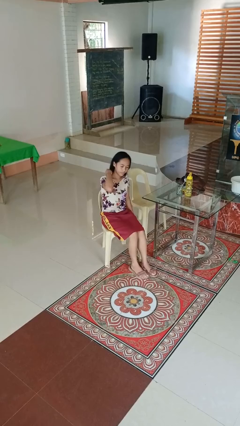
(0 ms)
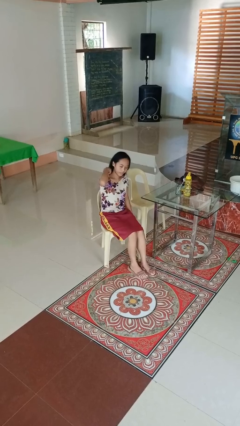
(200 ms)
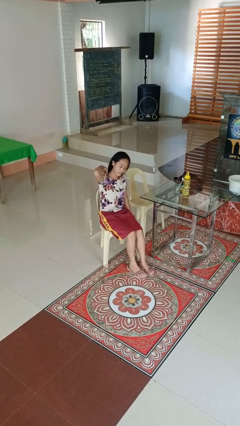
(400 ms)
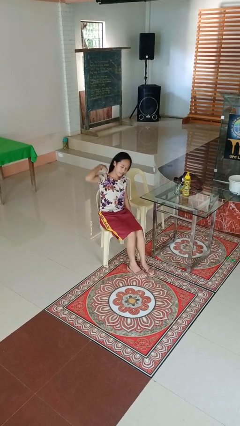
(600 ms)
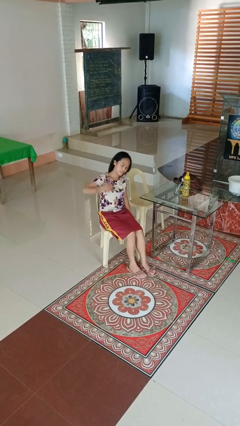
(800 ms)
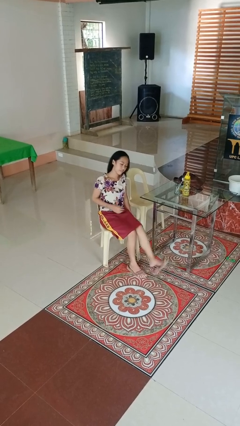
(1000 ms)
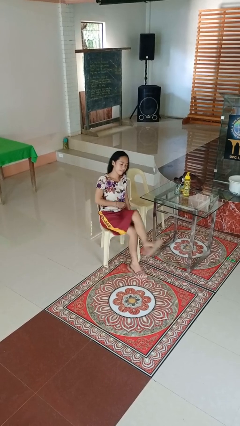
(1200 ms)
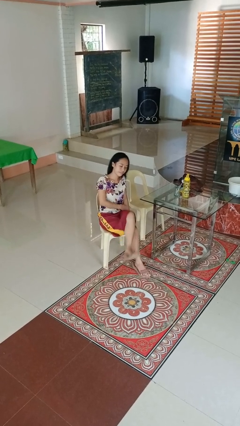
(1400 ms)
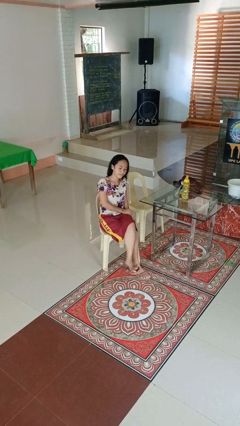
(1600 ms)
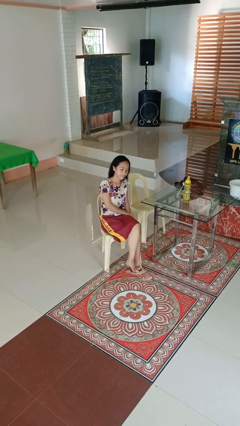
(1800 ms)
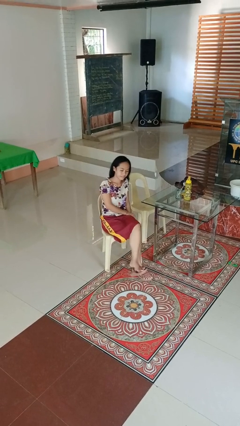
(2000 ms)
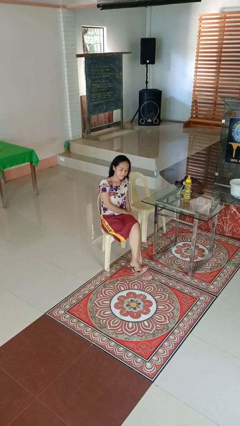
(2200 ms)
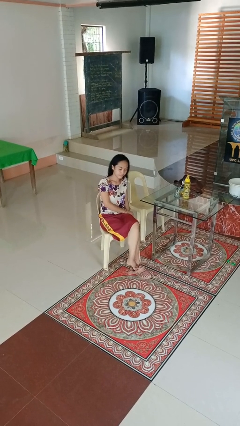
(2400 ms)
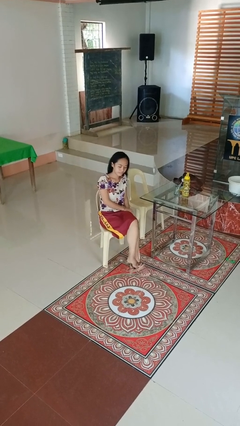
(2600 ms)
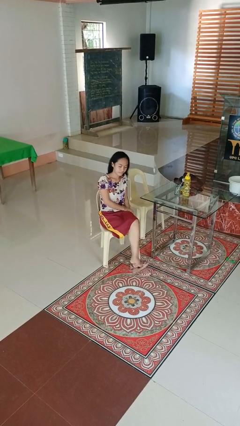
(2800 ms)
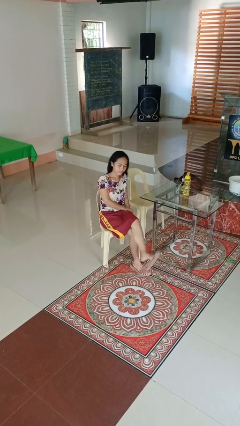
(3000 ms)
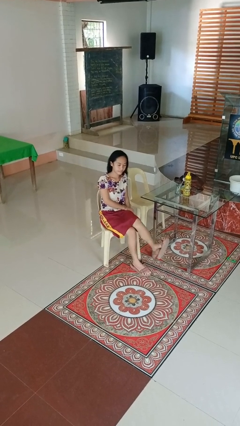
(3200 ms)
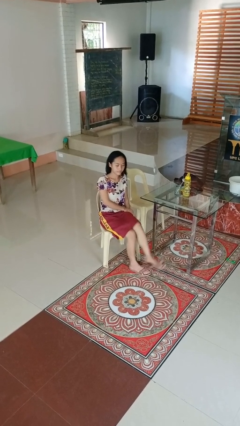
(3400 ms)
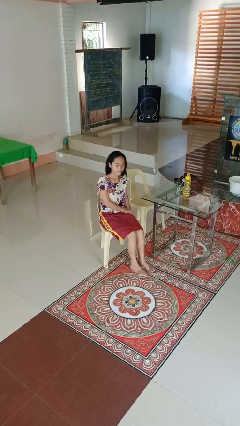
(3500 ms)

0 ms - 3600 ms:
person crosses legs

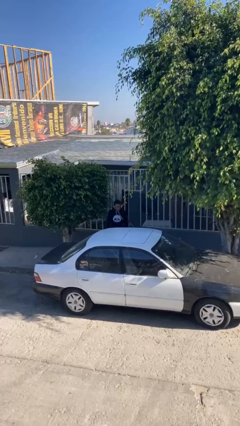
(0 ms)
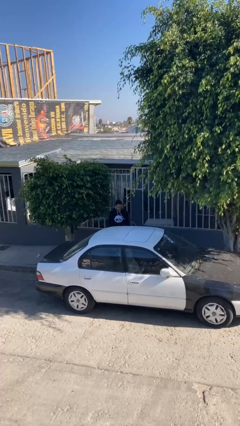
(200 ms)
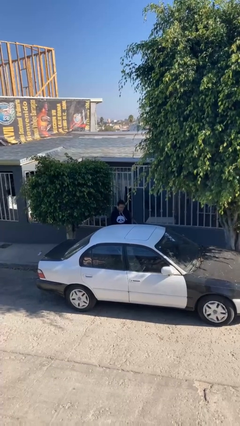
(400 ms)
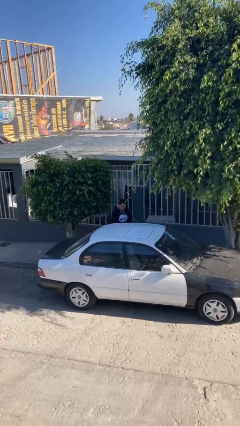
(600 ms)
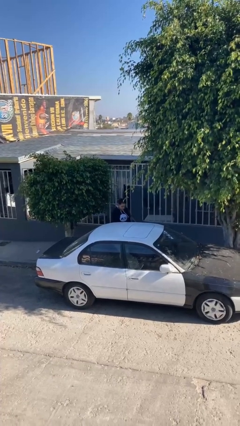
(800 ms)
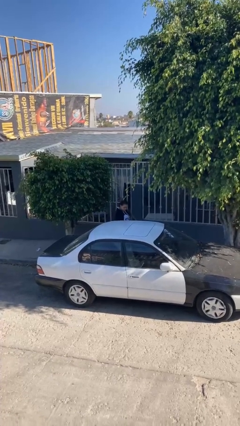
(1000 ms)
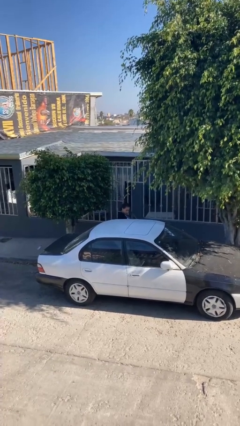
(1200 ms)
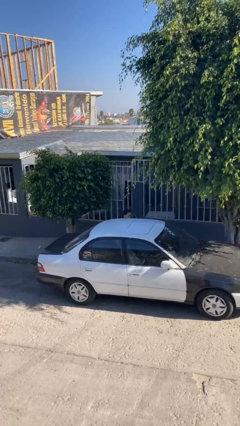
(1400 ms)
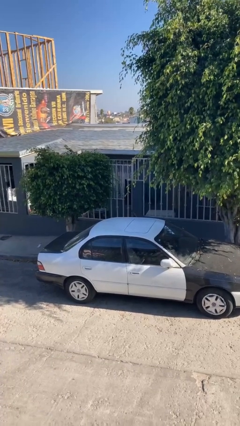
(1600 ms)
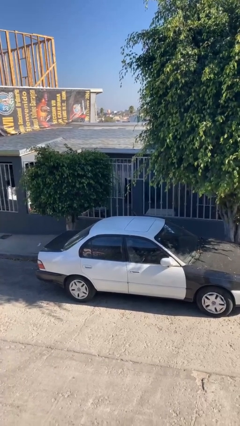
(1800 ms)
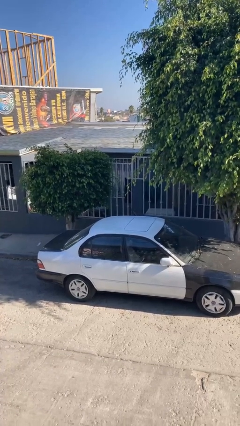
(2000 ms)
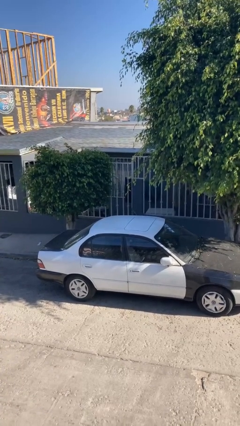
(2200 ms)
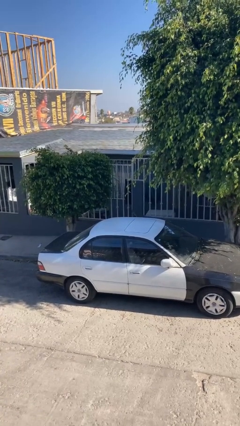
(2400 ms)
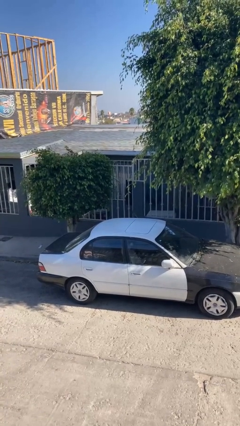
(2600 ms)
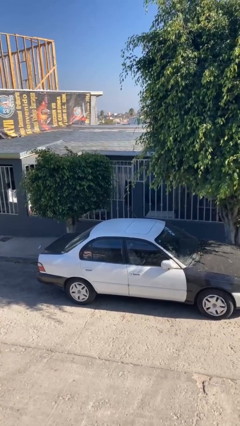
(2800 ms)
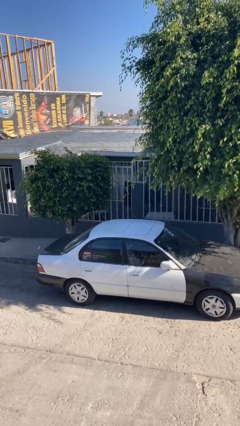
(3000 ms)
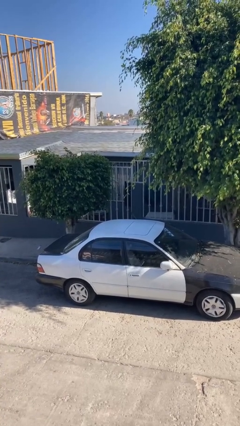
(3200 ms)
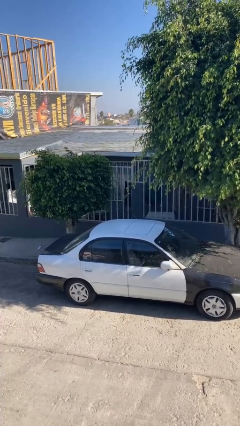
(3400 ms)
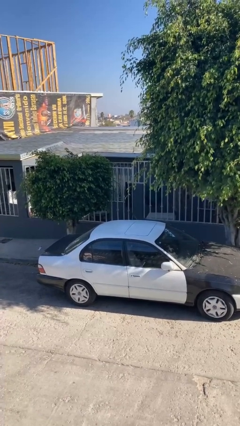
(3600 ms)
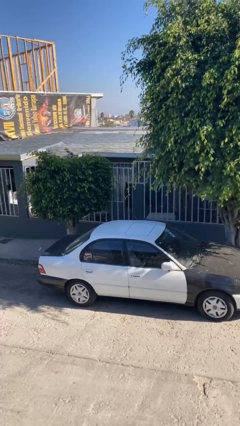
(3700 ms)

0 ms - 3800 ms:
person enters car

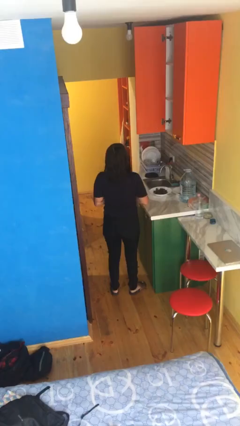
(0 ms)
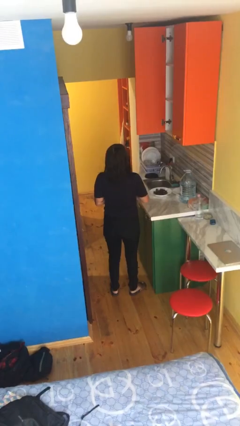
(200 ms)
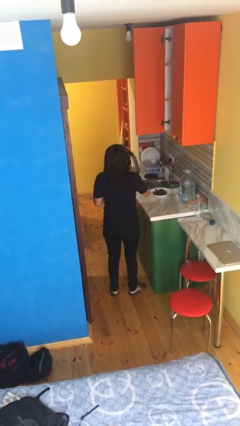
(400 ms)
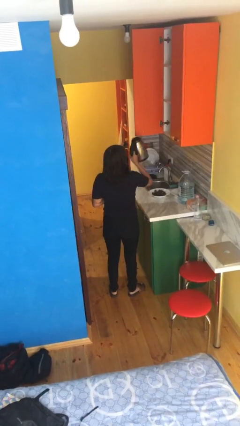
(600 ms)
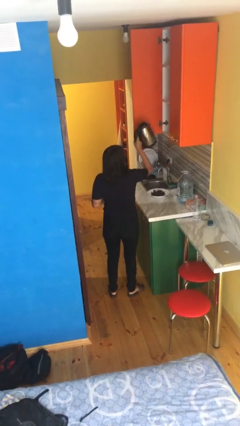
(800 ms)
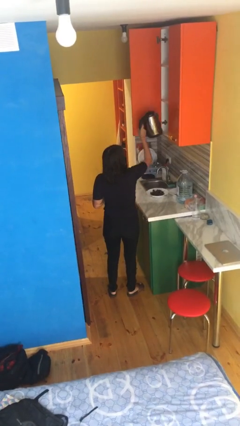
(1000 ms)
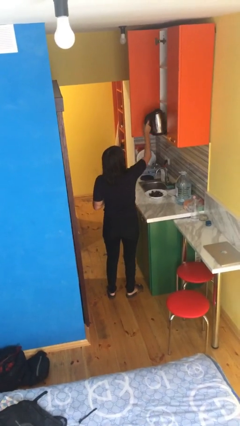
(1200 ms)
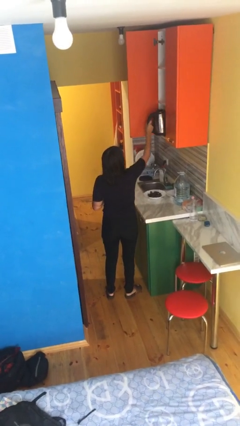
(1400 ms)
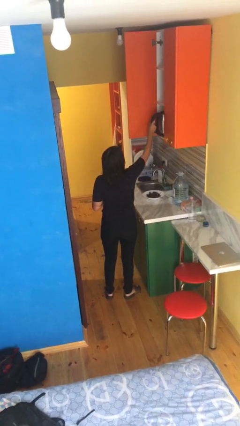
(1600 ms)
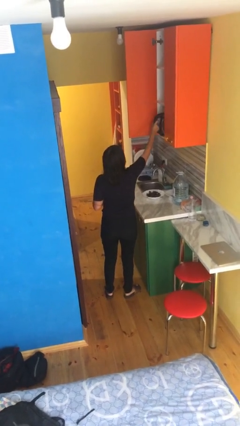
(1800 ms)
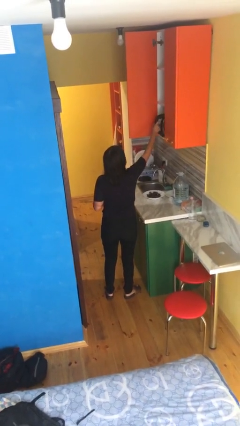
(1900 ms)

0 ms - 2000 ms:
person puts down object into cabinet

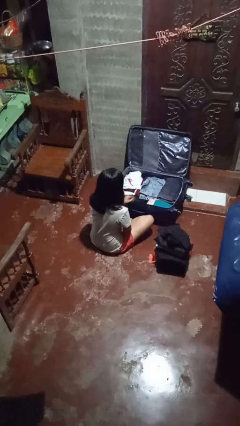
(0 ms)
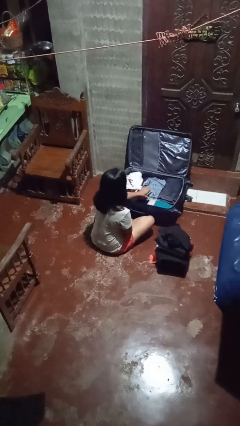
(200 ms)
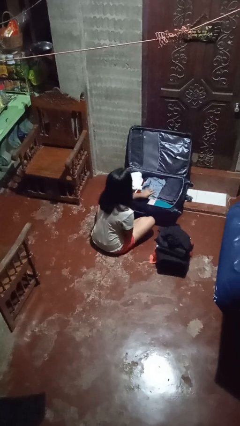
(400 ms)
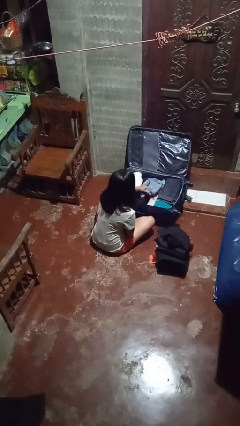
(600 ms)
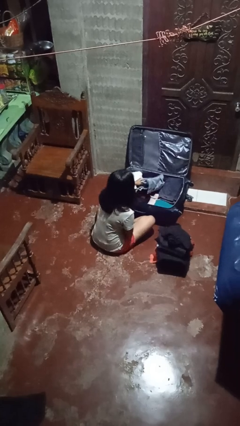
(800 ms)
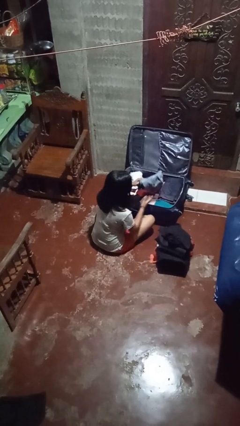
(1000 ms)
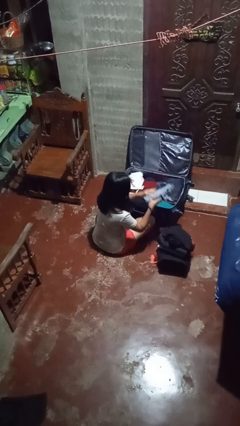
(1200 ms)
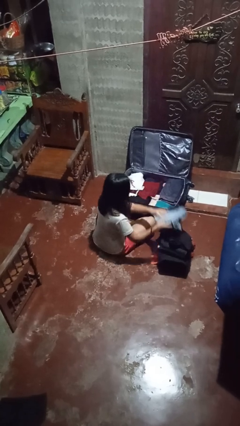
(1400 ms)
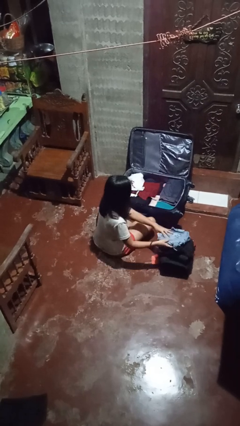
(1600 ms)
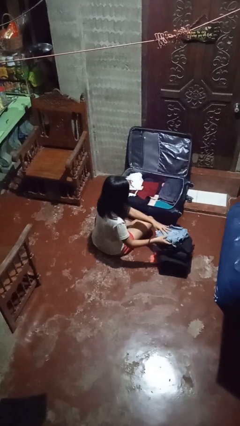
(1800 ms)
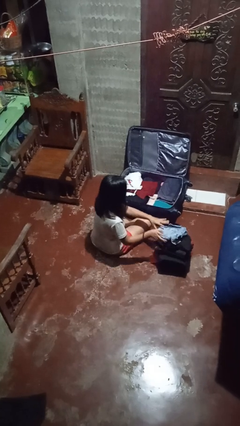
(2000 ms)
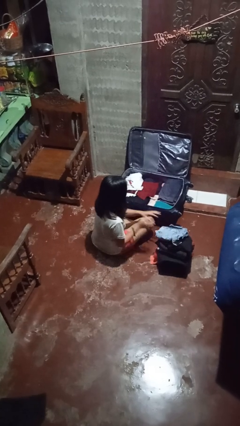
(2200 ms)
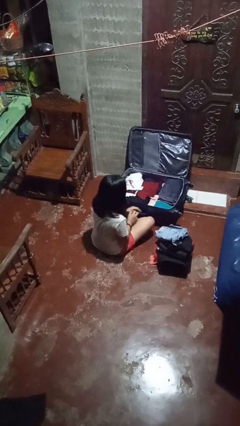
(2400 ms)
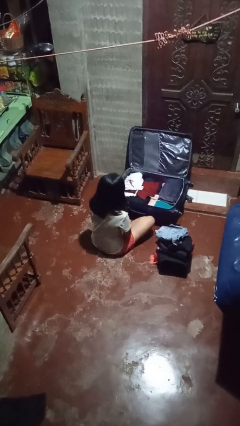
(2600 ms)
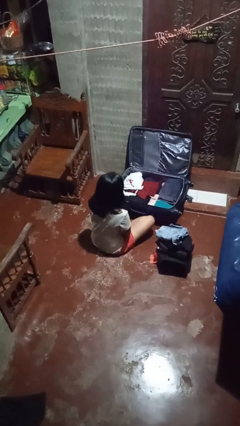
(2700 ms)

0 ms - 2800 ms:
person unloads clothes from suitcase

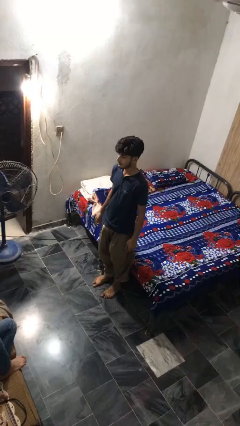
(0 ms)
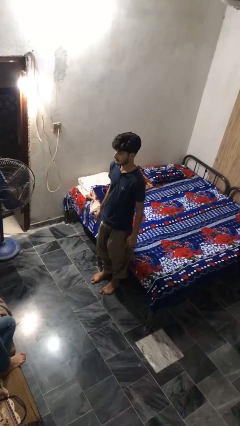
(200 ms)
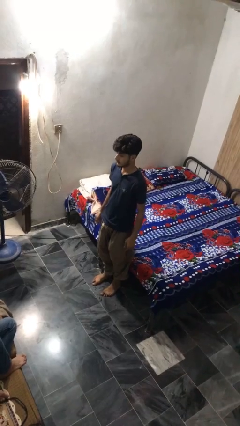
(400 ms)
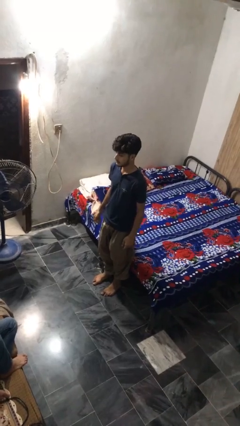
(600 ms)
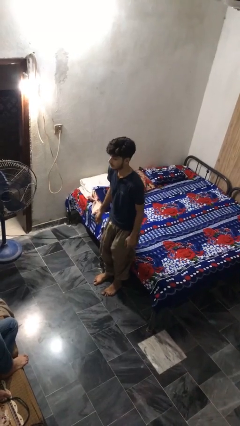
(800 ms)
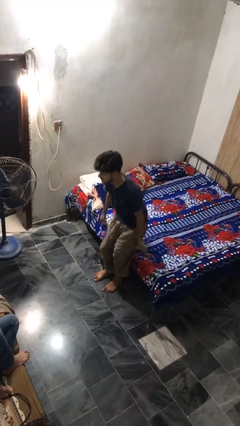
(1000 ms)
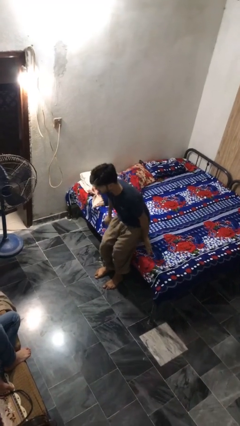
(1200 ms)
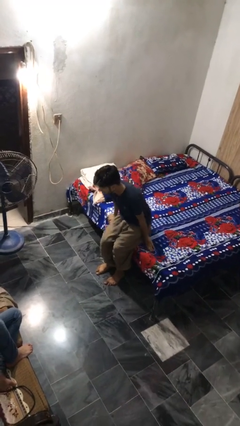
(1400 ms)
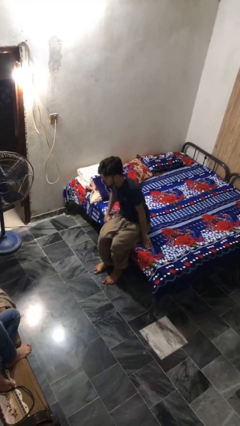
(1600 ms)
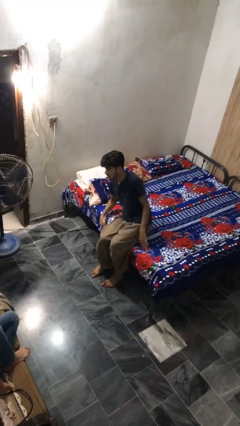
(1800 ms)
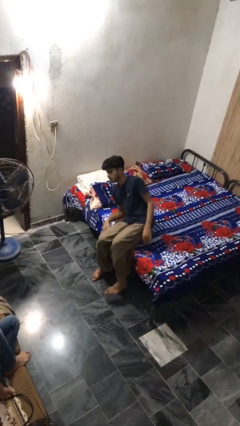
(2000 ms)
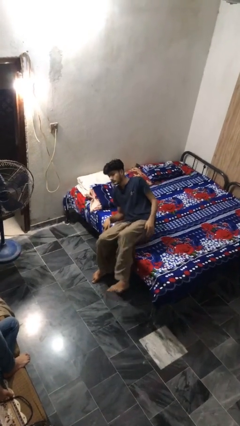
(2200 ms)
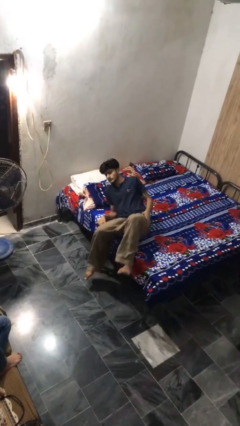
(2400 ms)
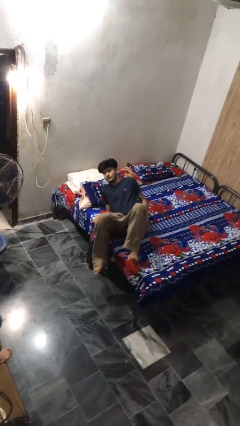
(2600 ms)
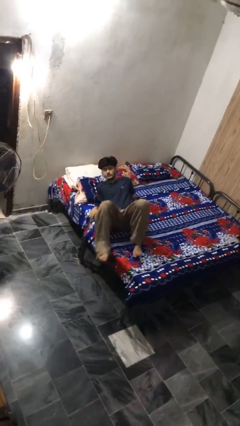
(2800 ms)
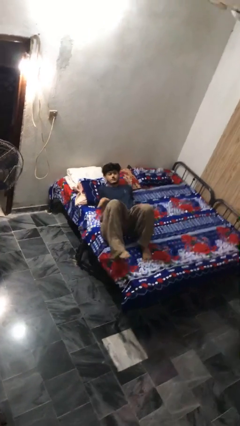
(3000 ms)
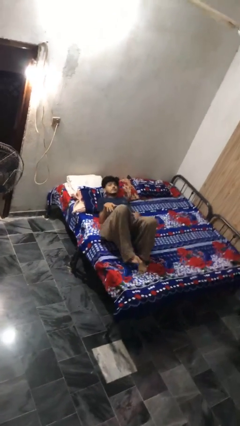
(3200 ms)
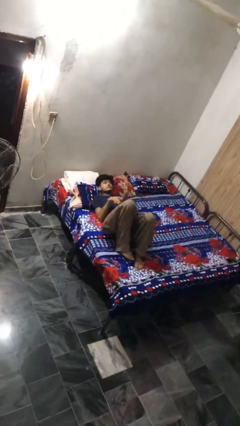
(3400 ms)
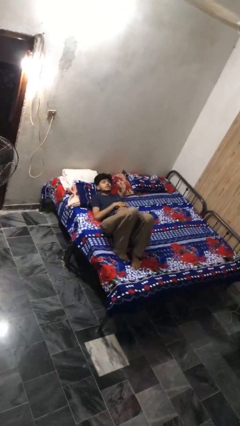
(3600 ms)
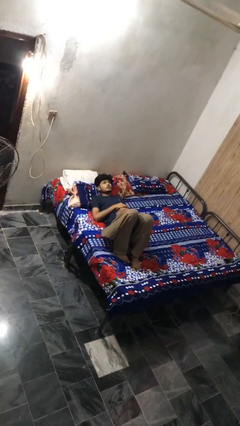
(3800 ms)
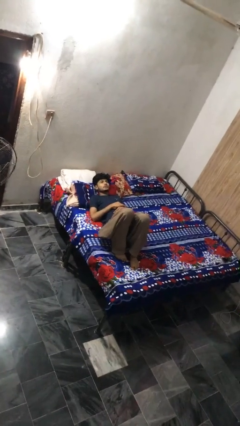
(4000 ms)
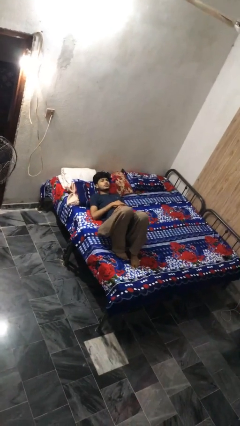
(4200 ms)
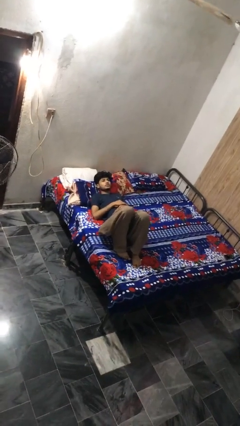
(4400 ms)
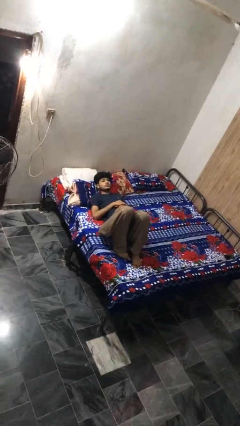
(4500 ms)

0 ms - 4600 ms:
person lies down on bed

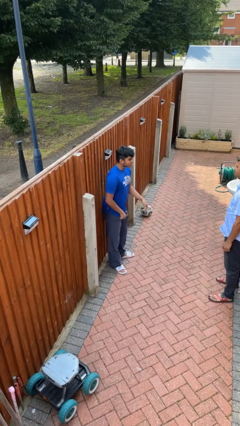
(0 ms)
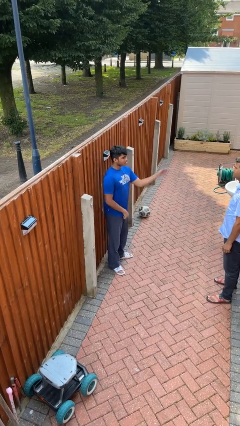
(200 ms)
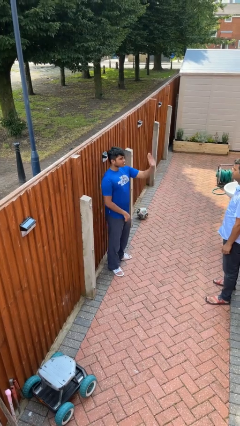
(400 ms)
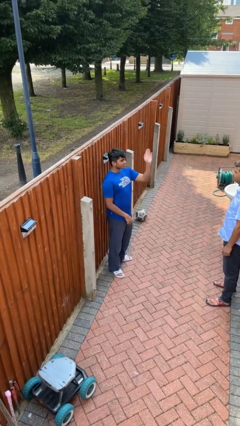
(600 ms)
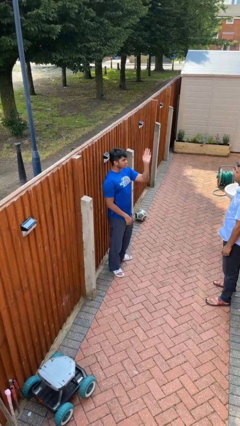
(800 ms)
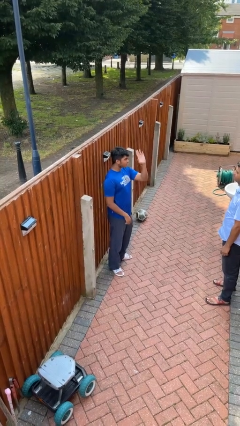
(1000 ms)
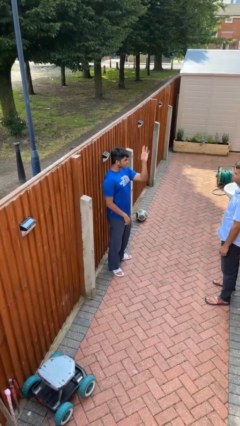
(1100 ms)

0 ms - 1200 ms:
person waves at person
